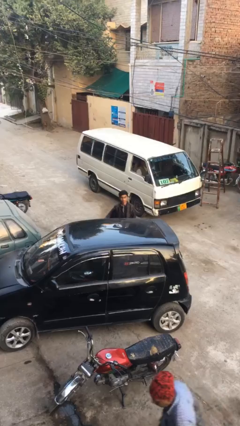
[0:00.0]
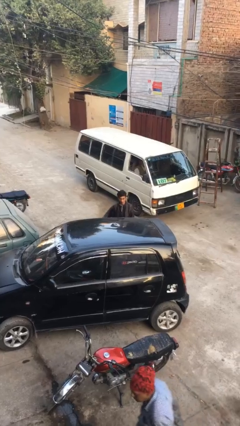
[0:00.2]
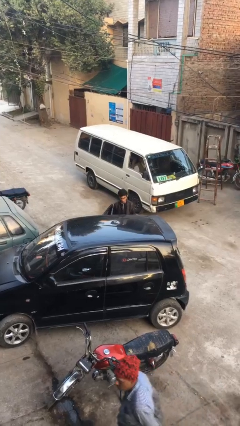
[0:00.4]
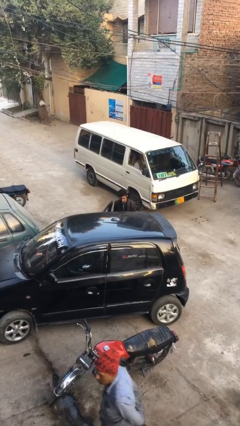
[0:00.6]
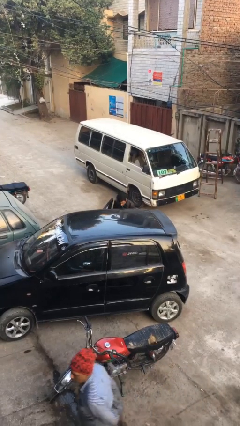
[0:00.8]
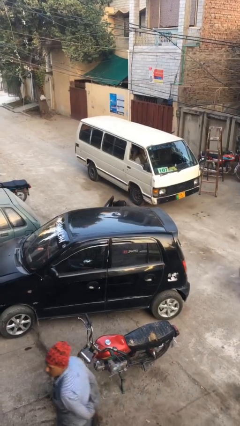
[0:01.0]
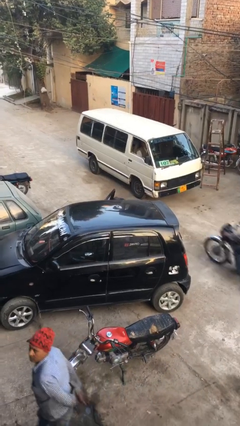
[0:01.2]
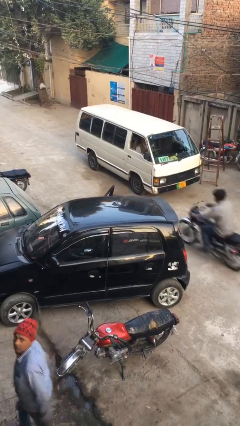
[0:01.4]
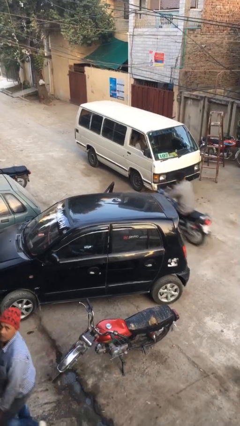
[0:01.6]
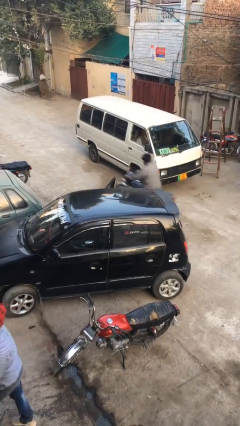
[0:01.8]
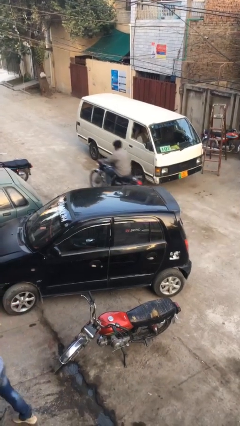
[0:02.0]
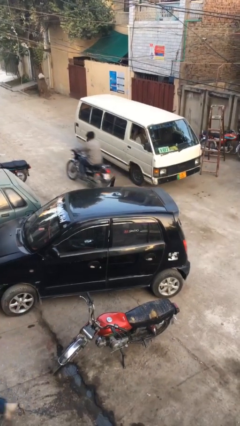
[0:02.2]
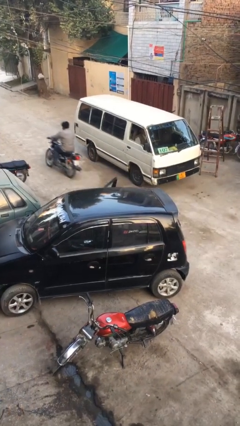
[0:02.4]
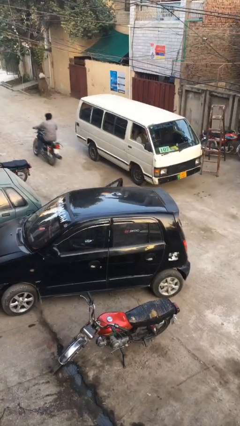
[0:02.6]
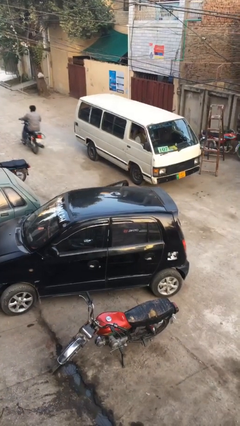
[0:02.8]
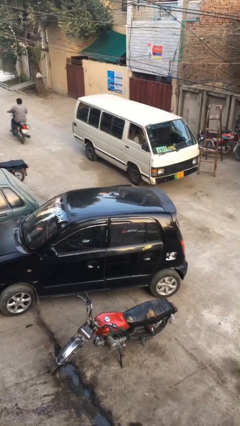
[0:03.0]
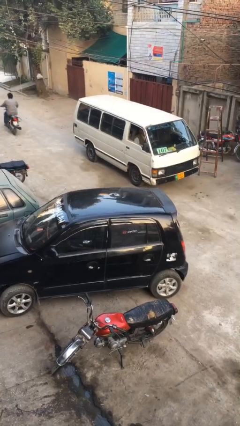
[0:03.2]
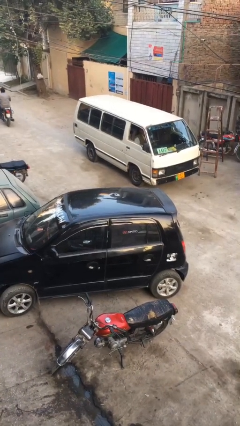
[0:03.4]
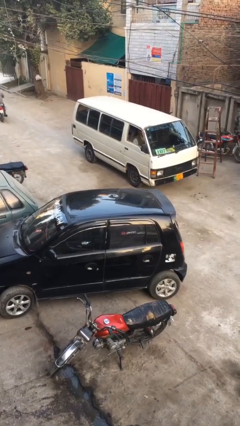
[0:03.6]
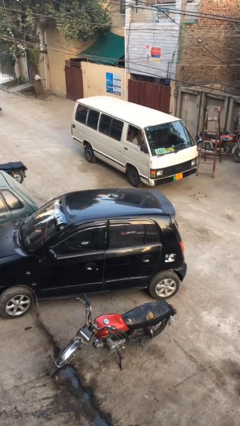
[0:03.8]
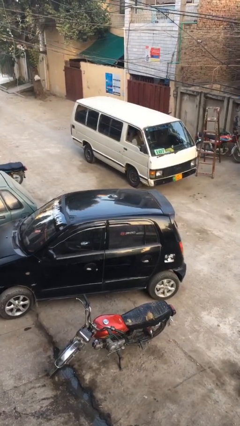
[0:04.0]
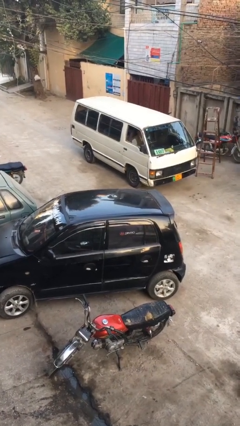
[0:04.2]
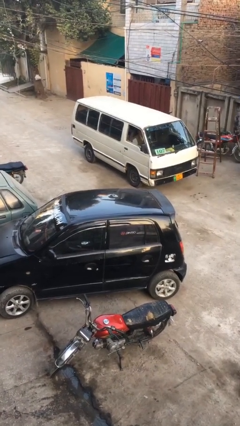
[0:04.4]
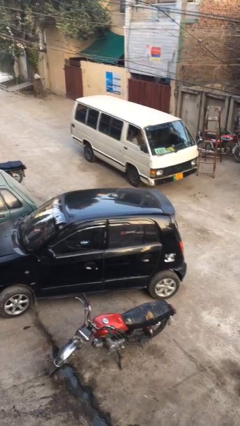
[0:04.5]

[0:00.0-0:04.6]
person enters car

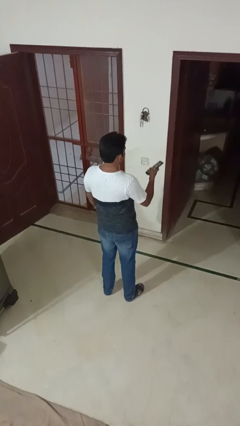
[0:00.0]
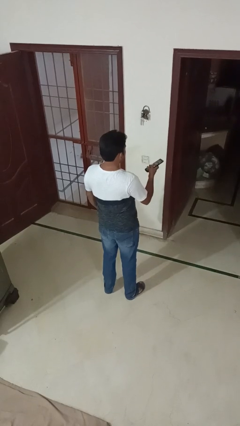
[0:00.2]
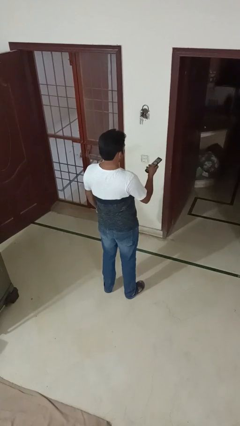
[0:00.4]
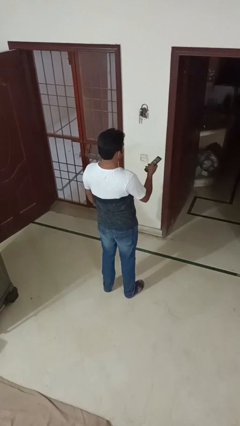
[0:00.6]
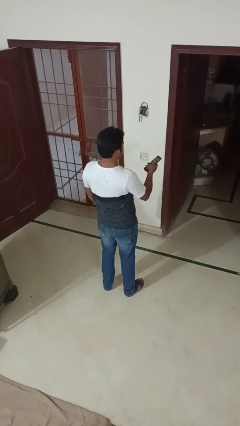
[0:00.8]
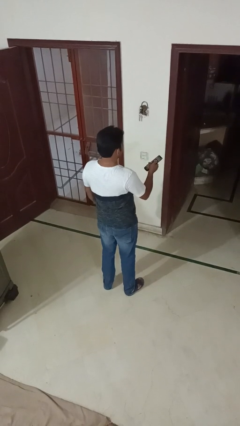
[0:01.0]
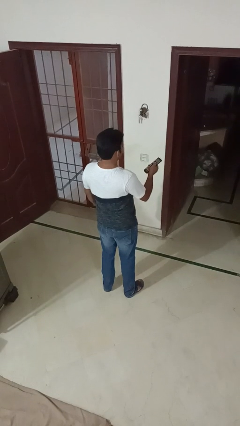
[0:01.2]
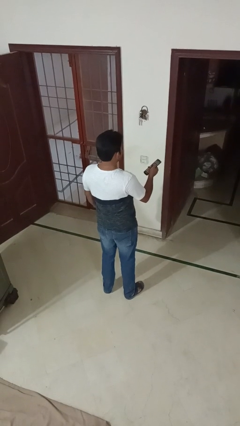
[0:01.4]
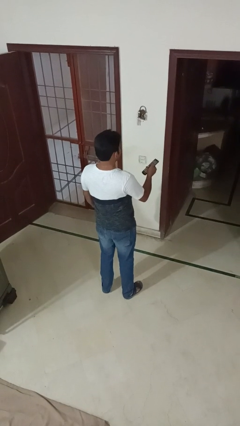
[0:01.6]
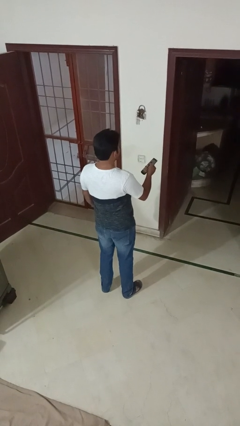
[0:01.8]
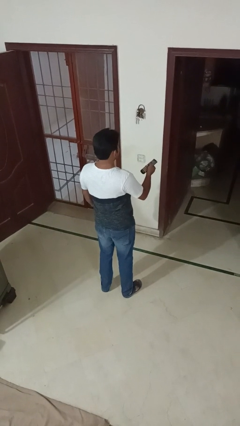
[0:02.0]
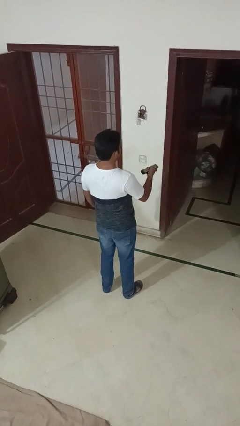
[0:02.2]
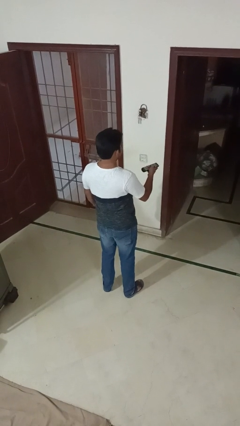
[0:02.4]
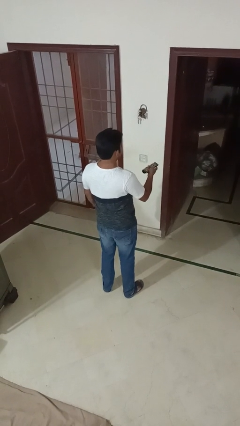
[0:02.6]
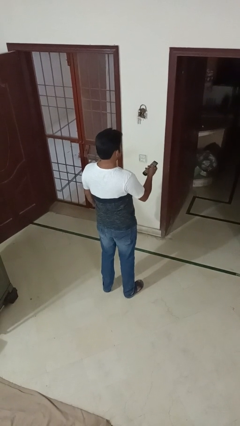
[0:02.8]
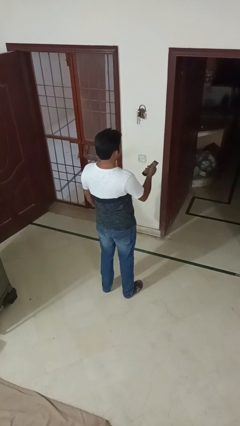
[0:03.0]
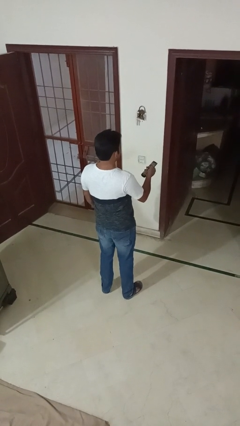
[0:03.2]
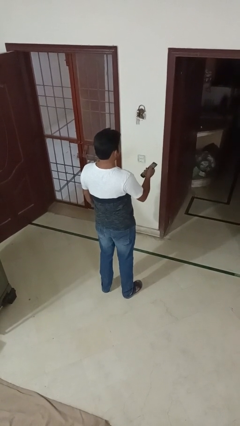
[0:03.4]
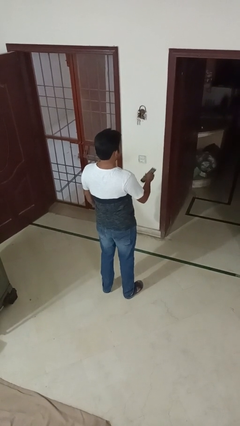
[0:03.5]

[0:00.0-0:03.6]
person uses television remote

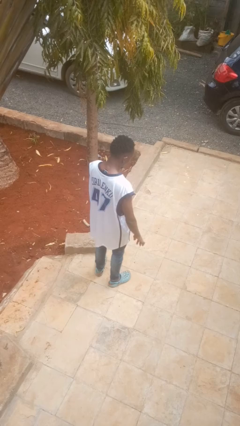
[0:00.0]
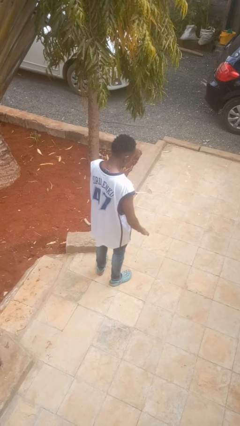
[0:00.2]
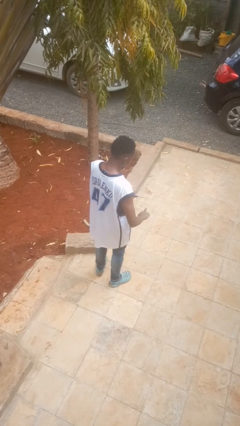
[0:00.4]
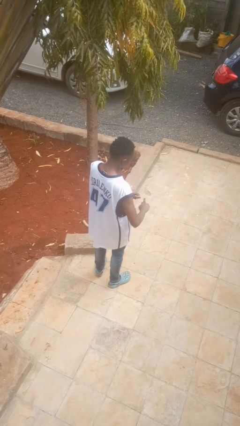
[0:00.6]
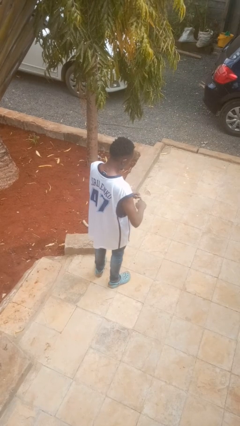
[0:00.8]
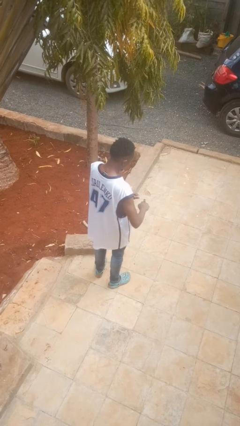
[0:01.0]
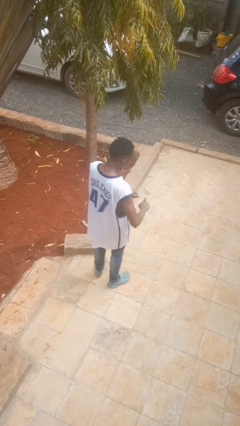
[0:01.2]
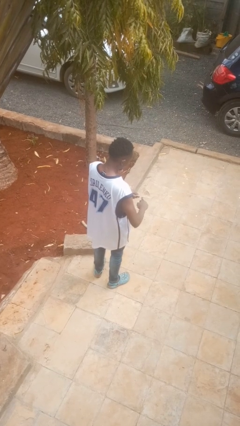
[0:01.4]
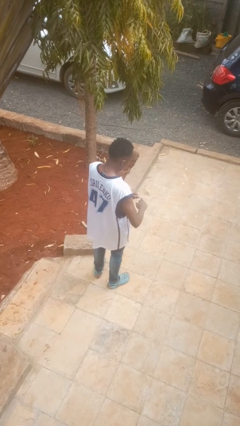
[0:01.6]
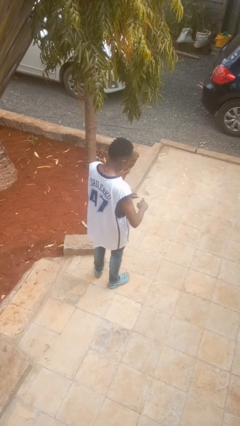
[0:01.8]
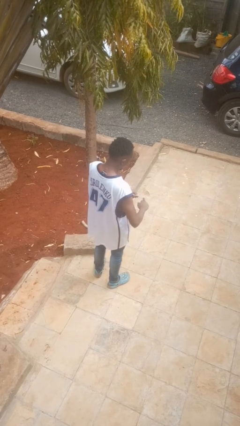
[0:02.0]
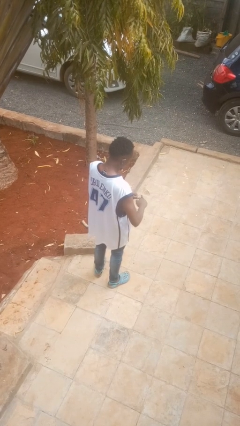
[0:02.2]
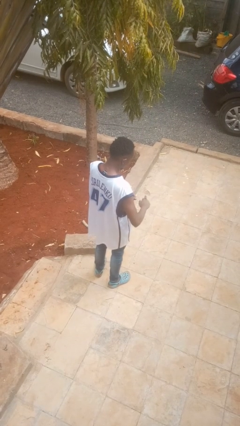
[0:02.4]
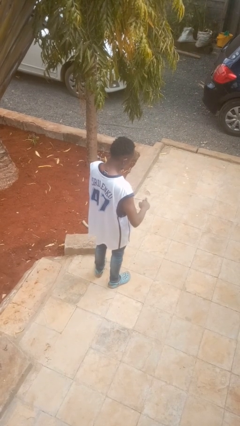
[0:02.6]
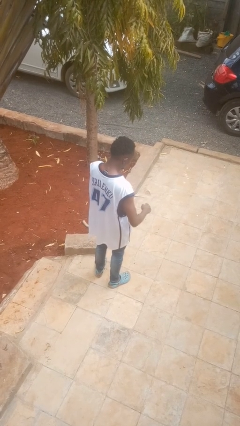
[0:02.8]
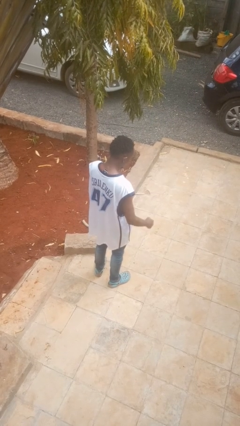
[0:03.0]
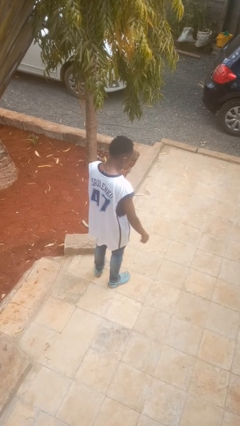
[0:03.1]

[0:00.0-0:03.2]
person files fingernails

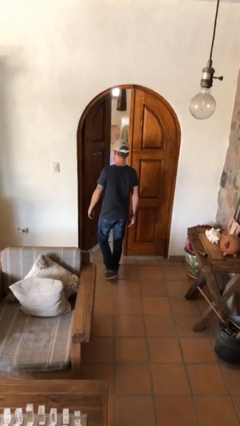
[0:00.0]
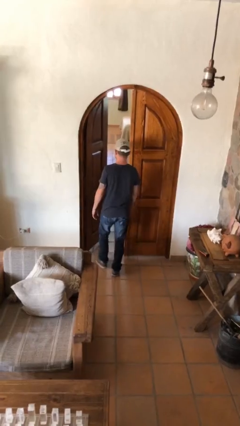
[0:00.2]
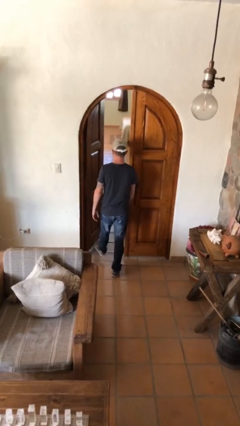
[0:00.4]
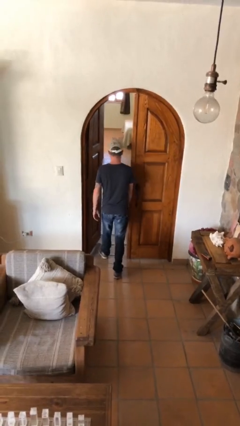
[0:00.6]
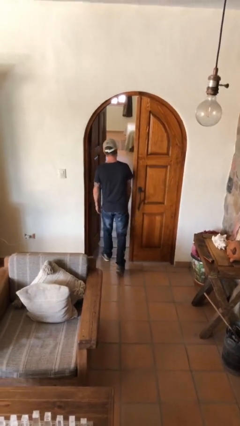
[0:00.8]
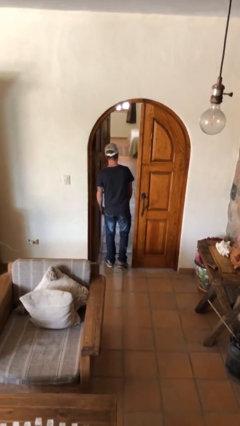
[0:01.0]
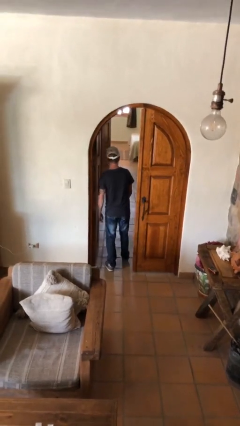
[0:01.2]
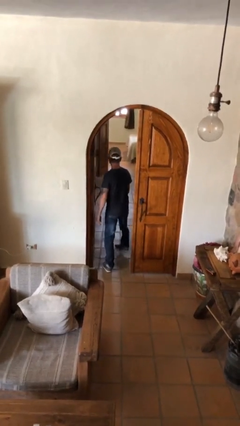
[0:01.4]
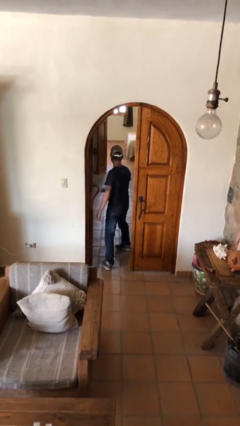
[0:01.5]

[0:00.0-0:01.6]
person exits scene through structure

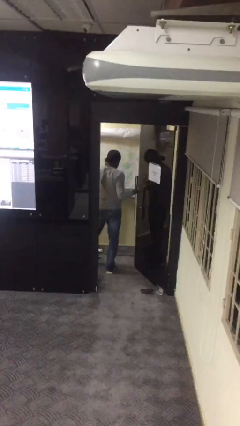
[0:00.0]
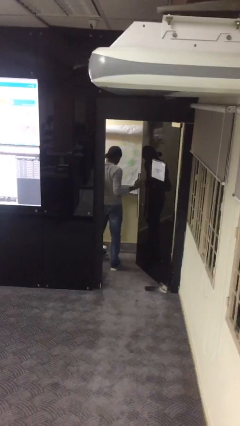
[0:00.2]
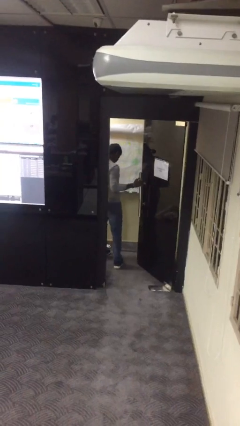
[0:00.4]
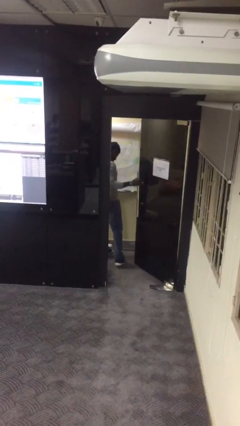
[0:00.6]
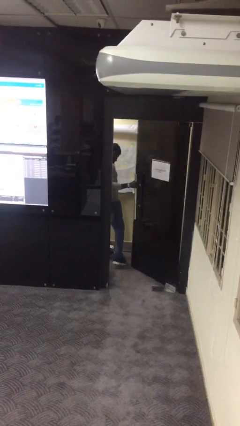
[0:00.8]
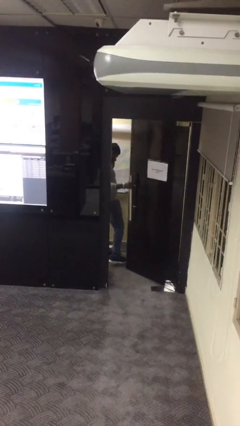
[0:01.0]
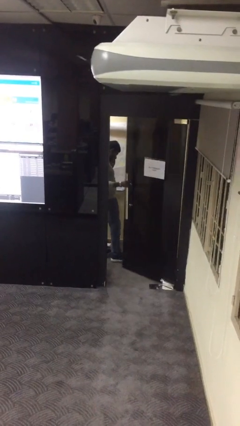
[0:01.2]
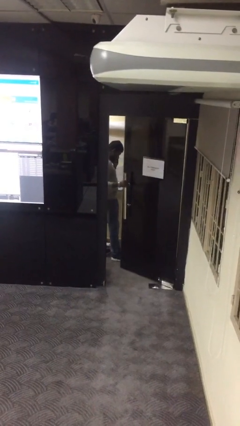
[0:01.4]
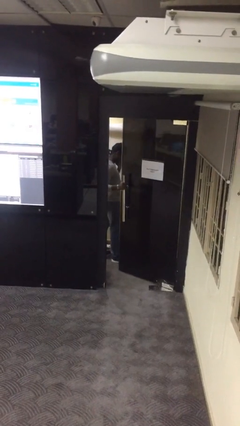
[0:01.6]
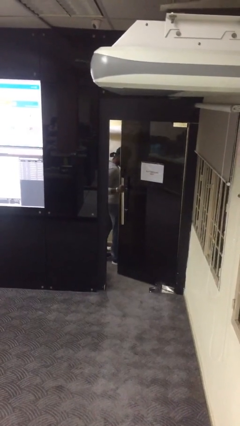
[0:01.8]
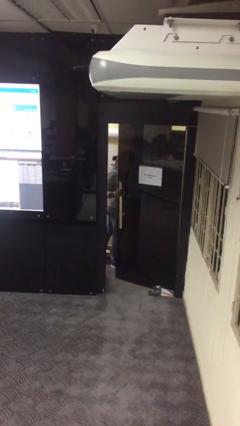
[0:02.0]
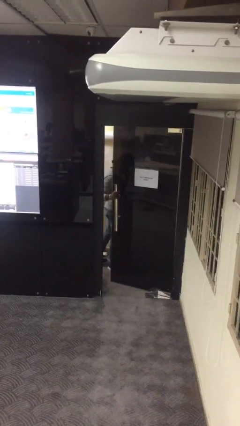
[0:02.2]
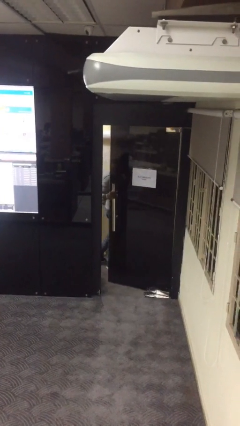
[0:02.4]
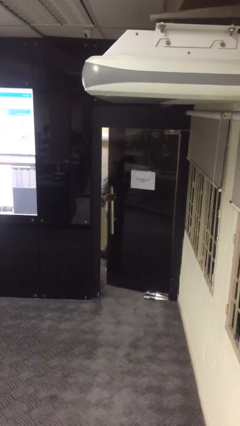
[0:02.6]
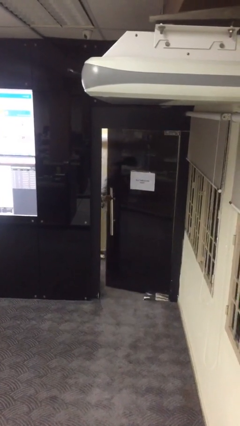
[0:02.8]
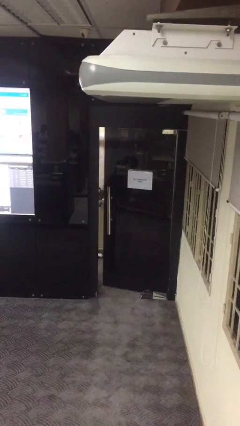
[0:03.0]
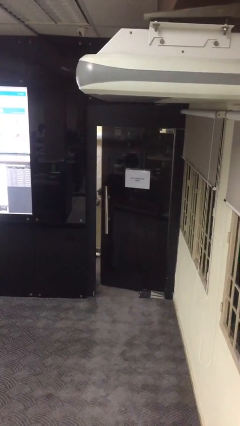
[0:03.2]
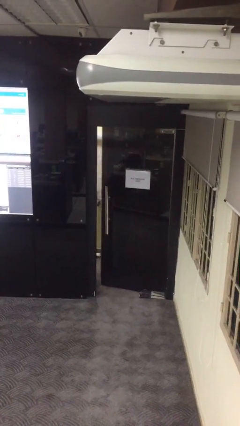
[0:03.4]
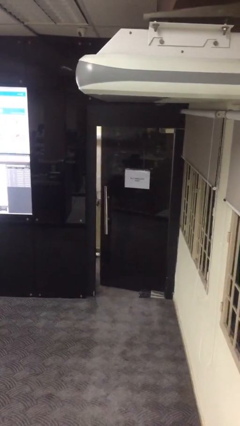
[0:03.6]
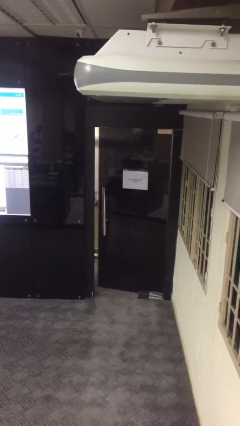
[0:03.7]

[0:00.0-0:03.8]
person closes facility door

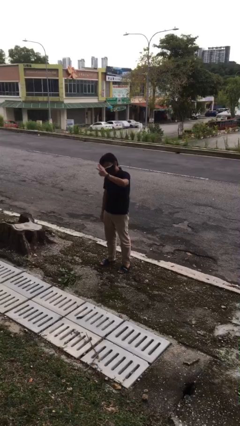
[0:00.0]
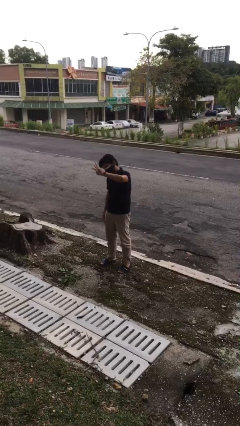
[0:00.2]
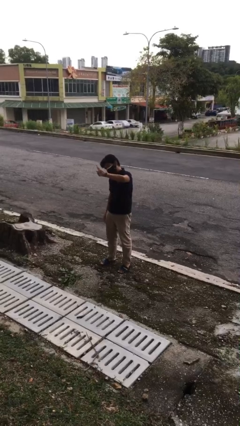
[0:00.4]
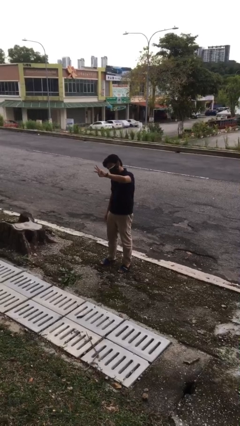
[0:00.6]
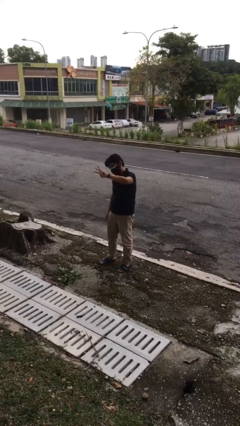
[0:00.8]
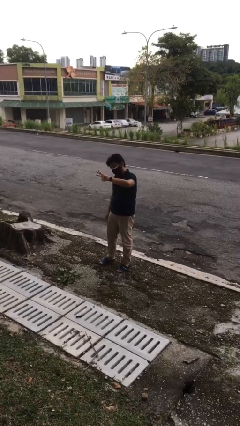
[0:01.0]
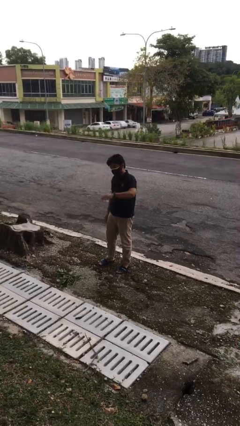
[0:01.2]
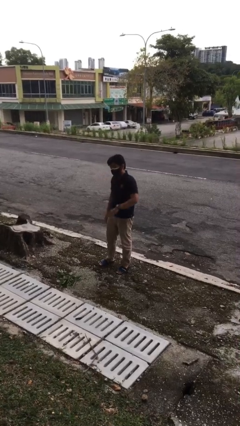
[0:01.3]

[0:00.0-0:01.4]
person gestures number three
